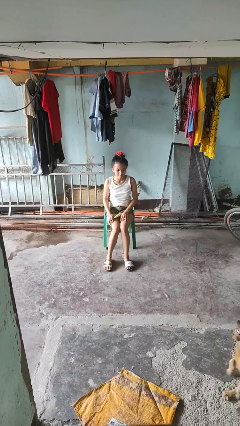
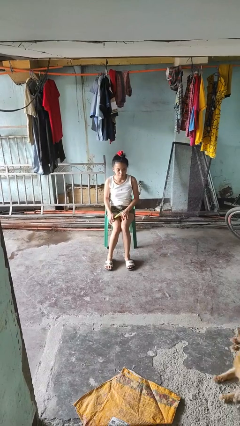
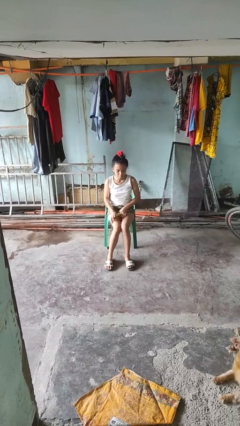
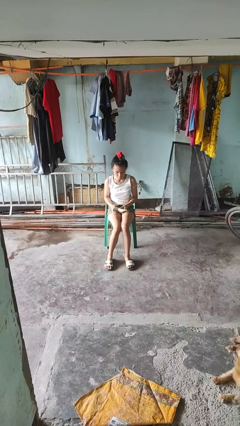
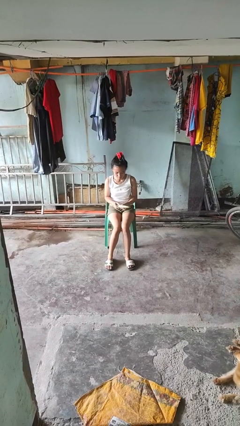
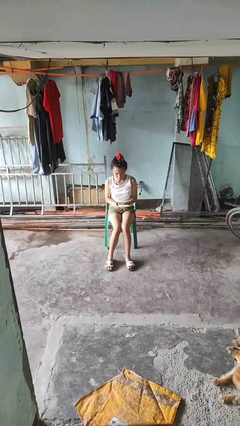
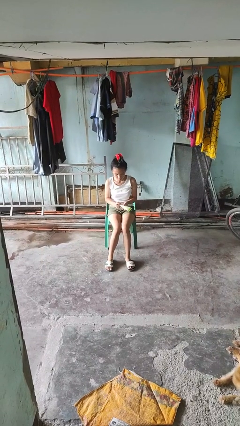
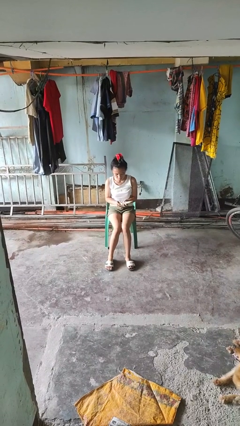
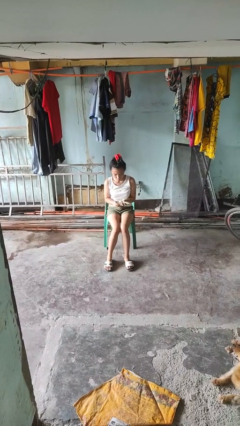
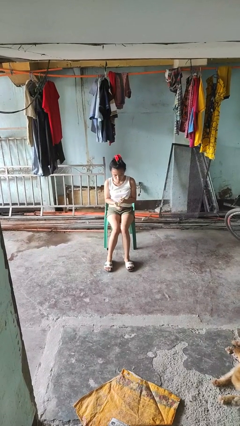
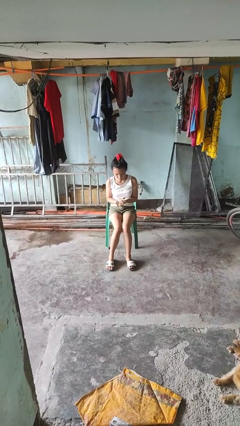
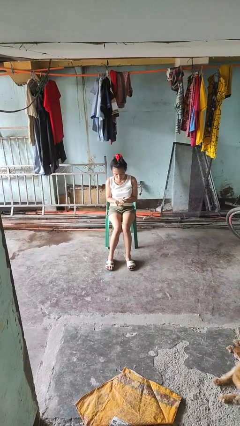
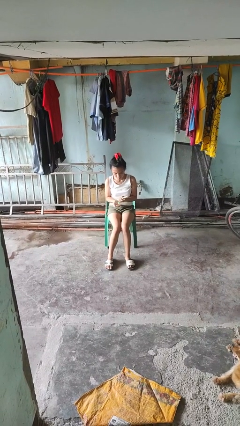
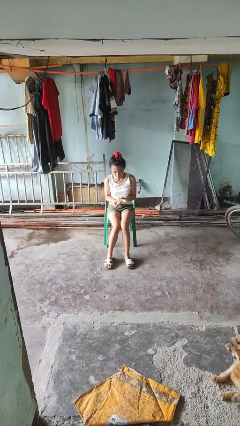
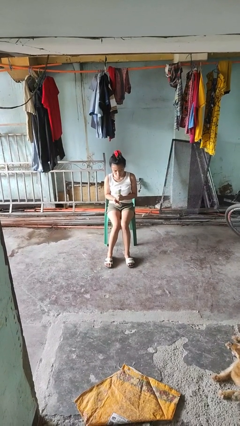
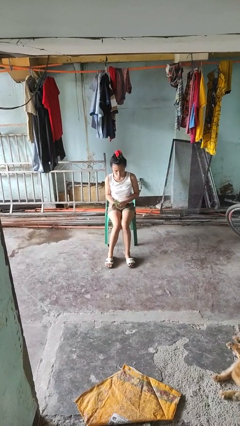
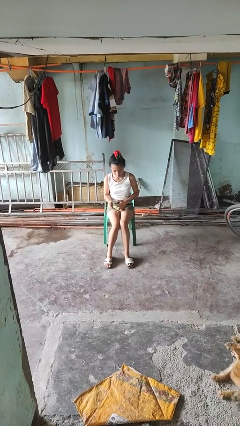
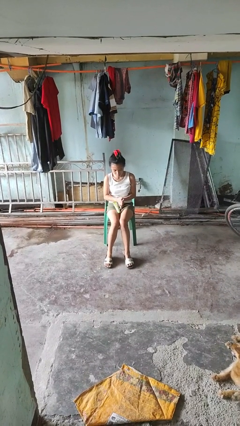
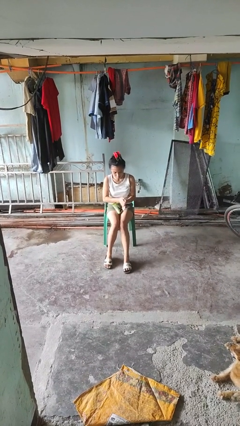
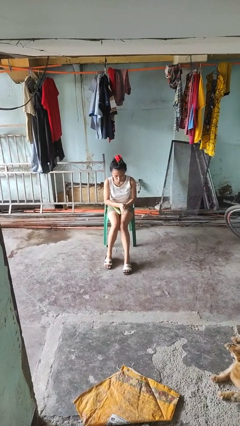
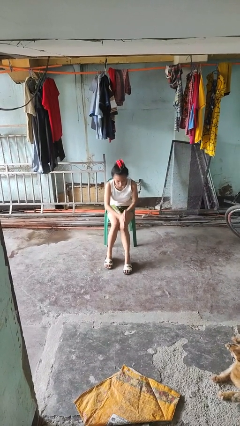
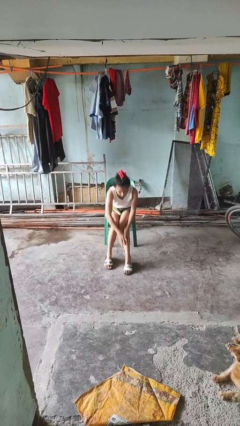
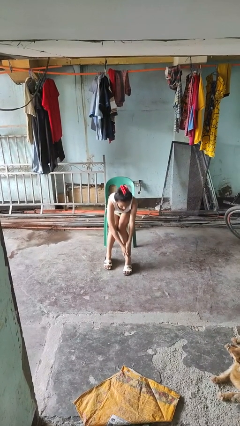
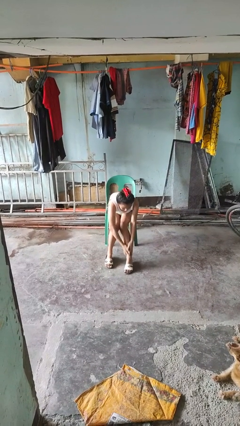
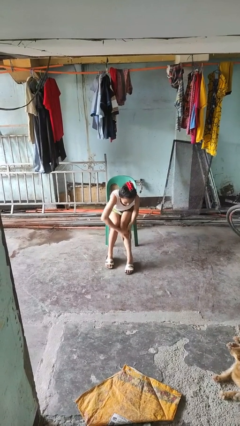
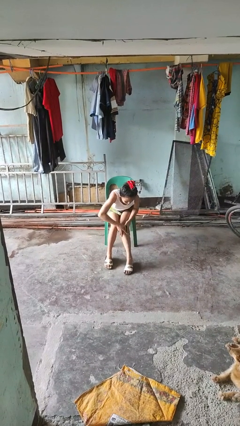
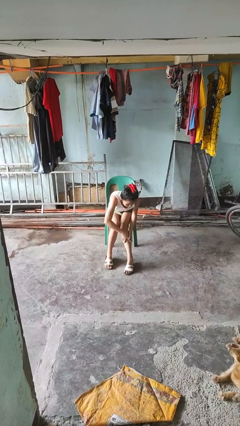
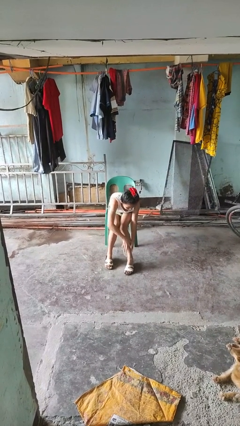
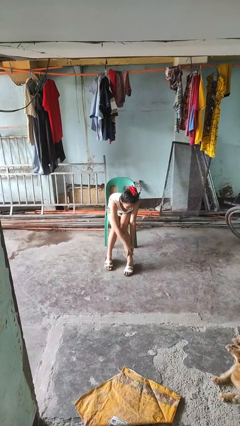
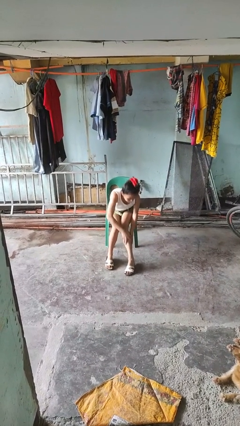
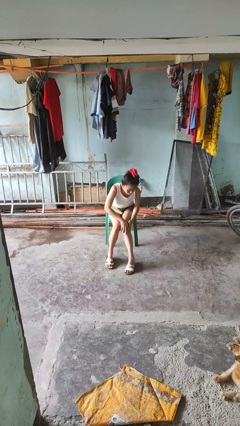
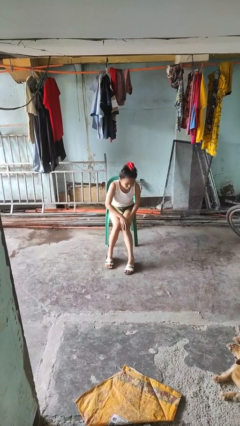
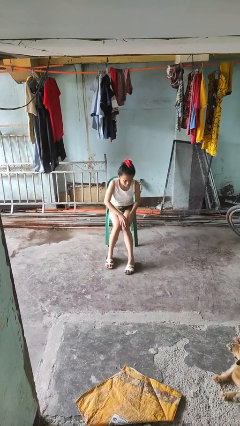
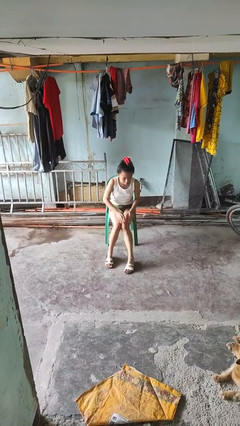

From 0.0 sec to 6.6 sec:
person applies sunscreen

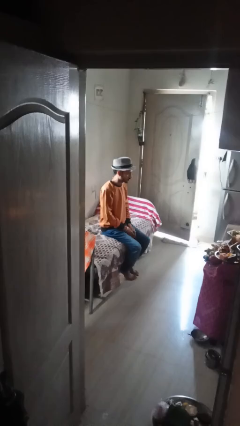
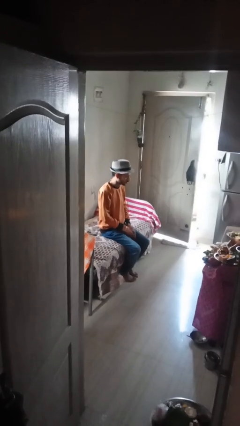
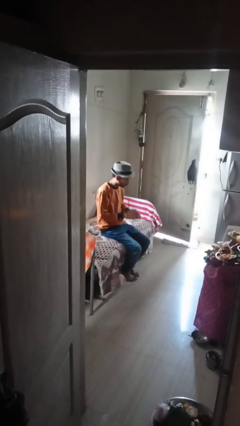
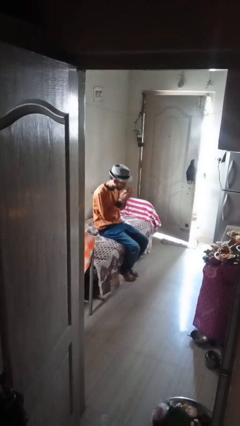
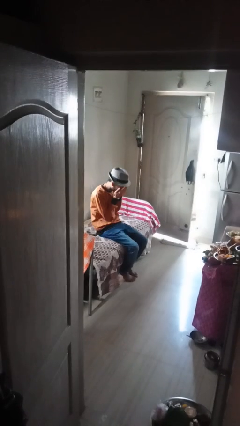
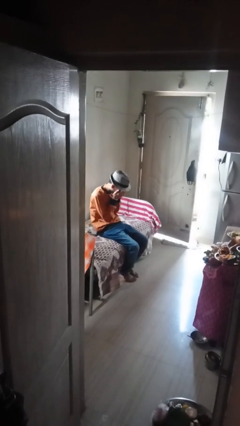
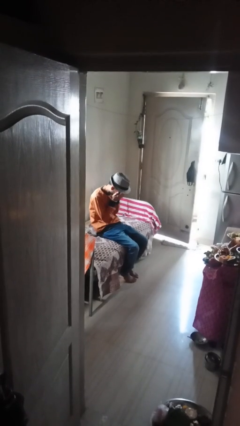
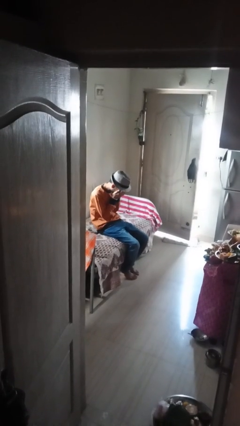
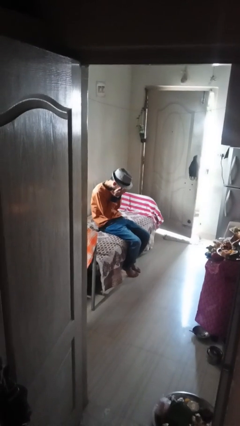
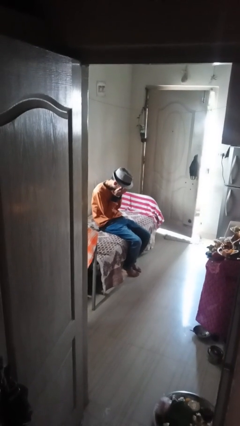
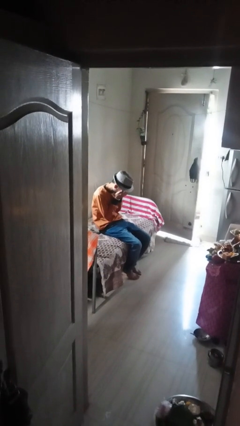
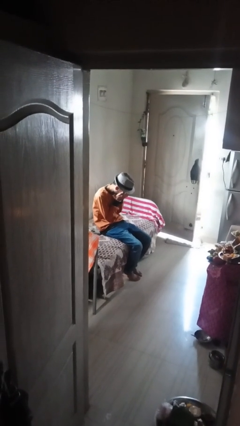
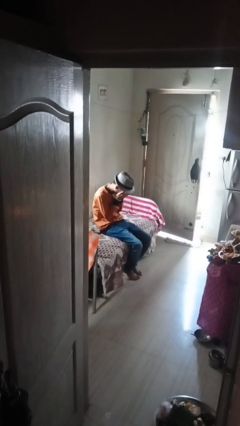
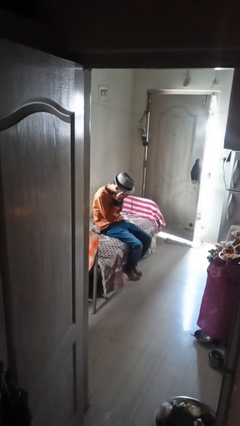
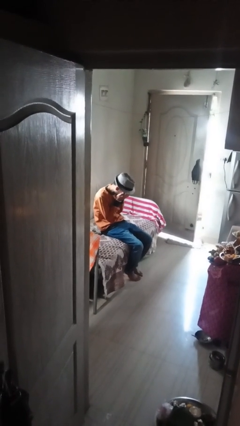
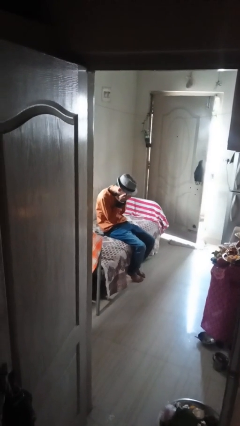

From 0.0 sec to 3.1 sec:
person covers face with hands

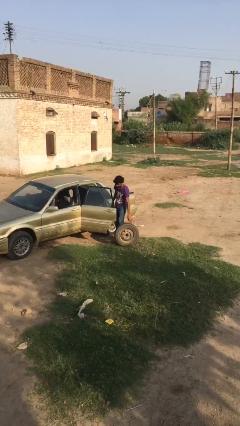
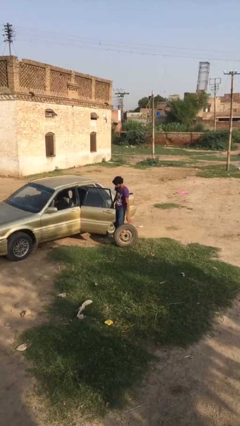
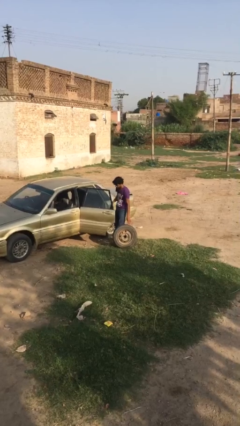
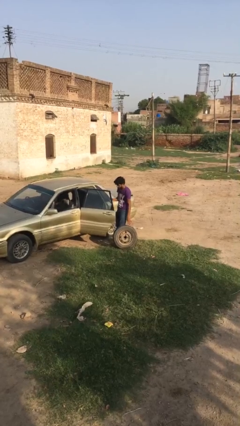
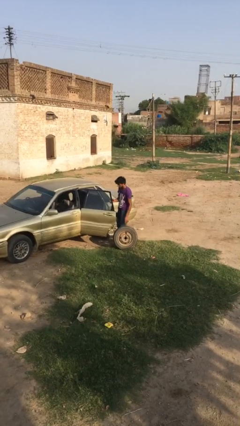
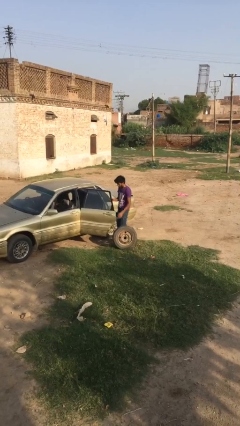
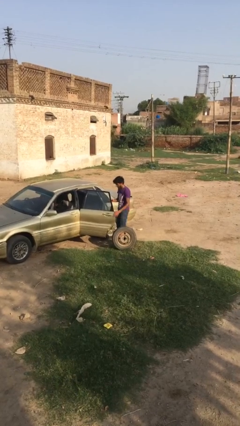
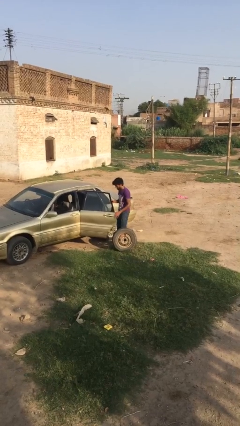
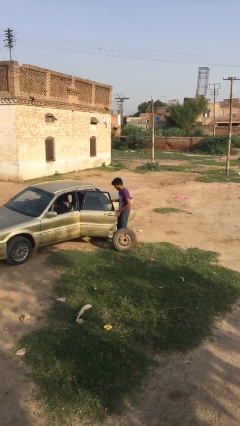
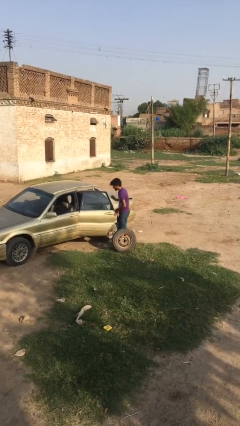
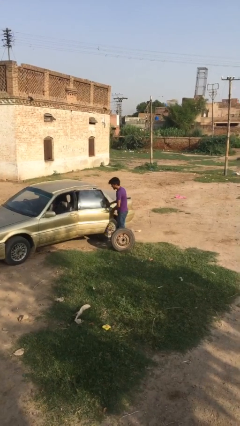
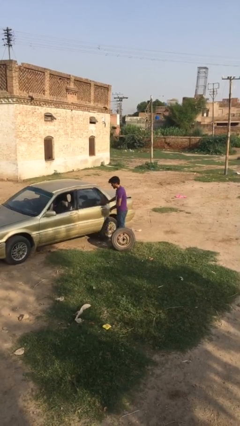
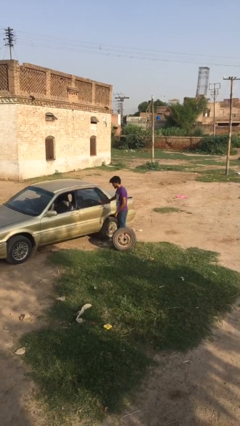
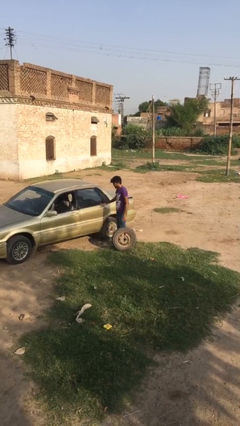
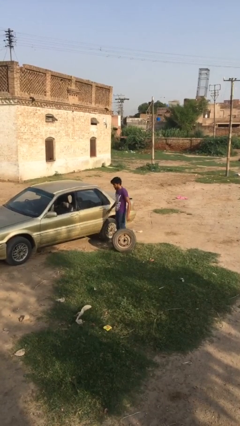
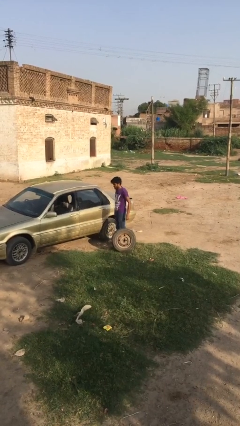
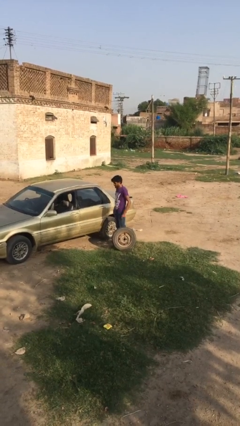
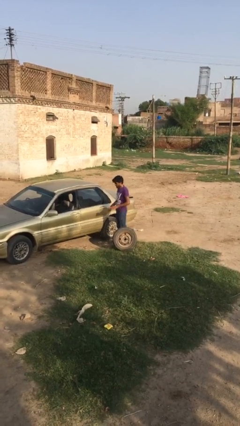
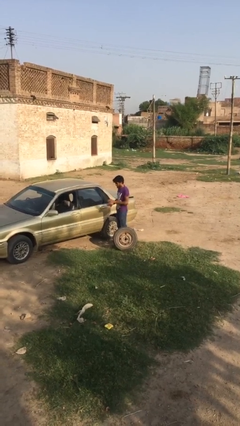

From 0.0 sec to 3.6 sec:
person closes car door

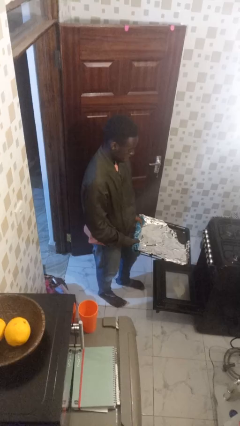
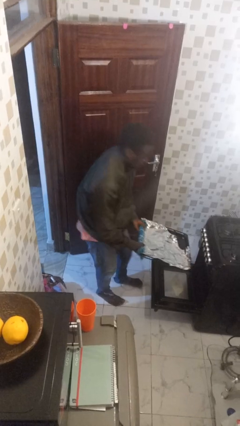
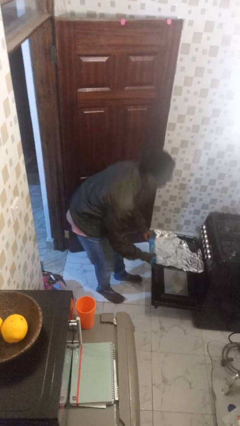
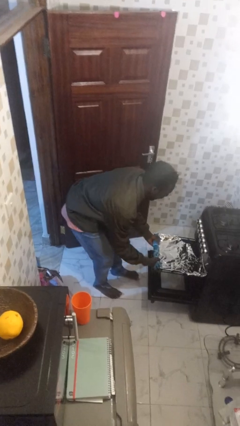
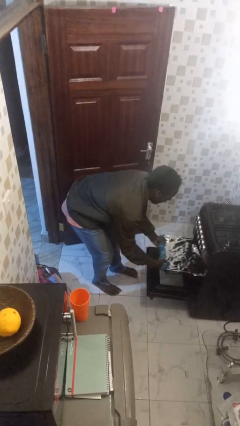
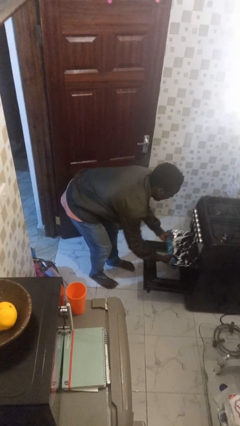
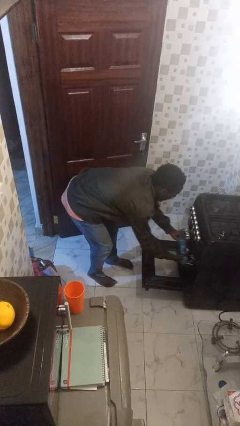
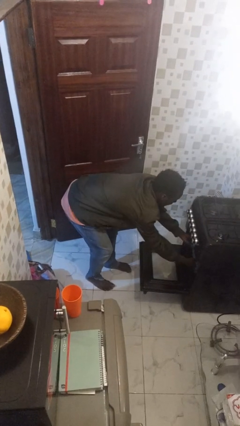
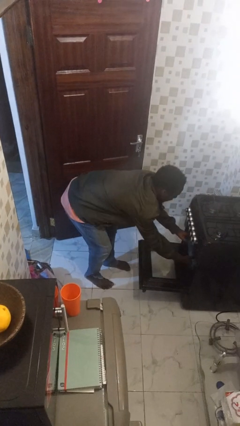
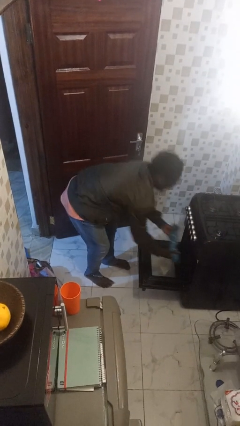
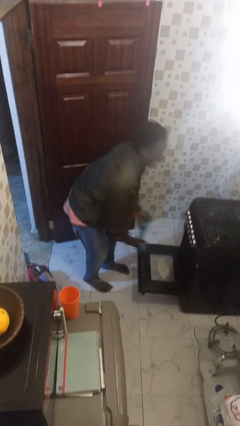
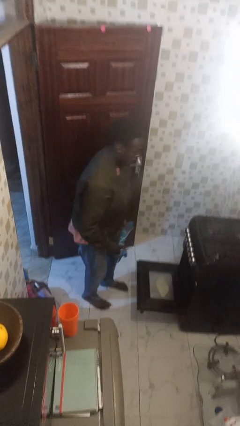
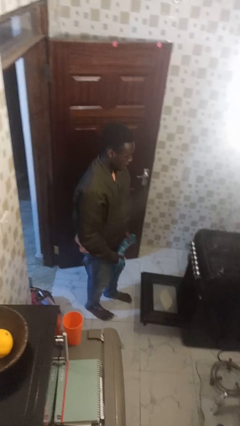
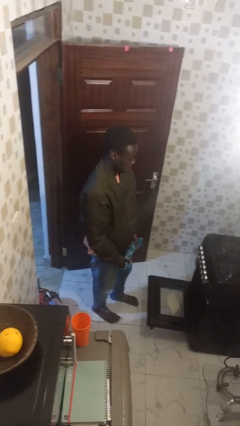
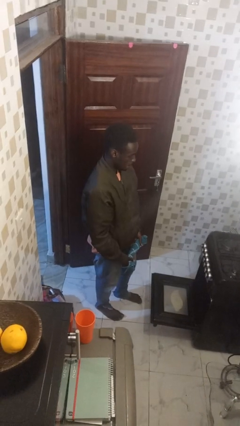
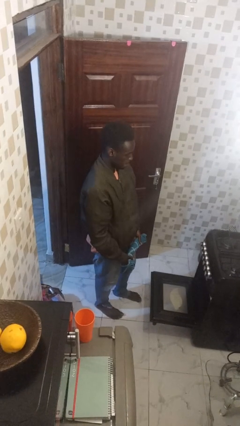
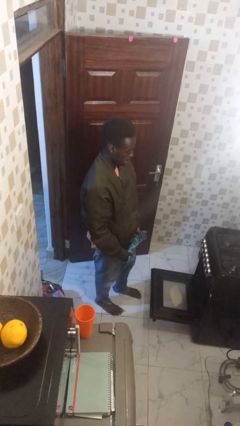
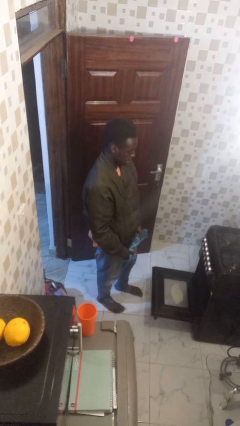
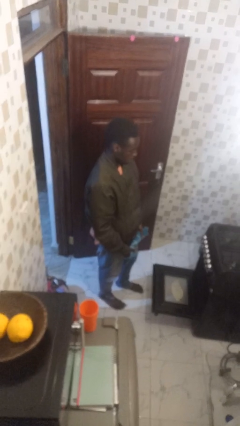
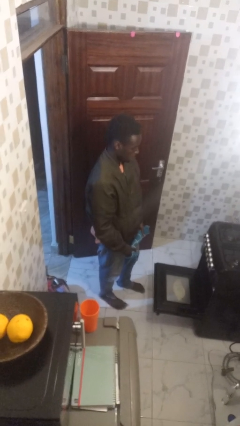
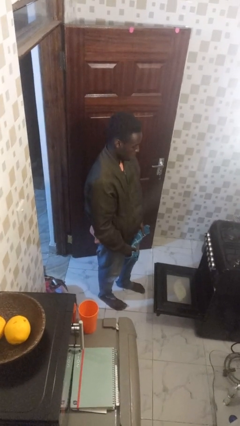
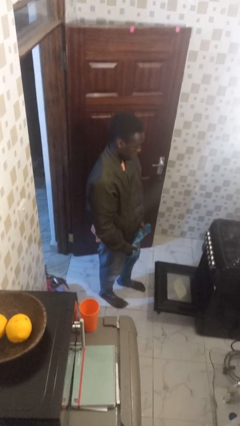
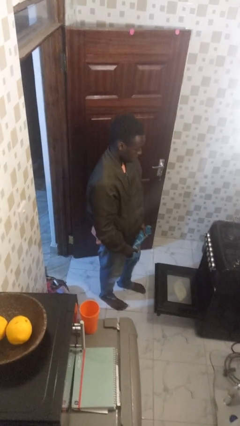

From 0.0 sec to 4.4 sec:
person puts object into oven
